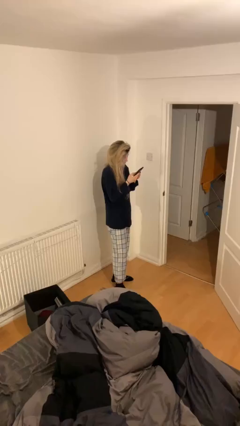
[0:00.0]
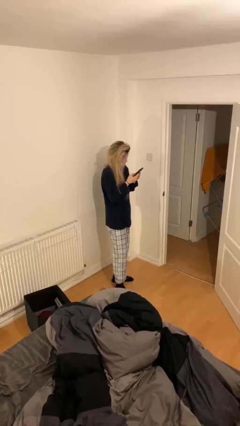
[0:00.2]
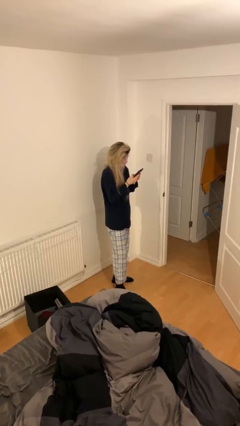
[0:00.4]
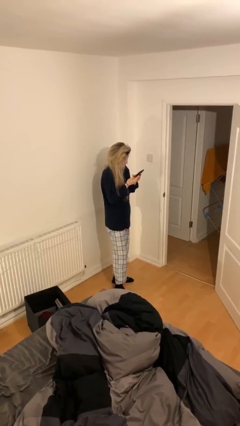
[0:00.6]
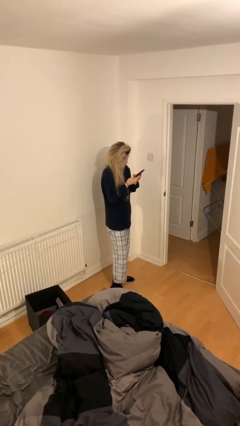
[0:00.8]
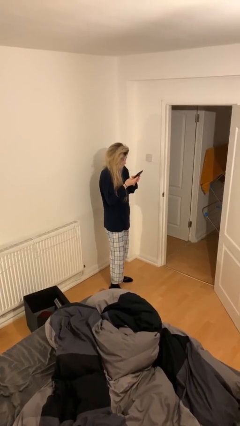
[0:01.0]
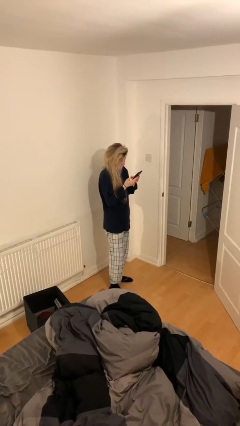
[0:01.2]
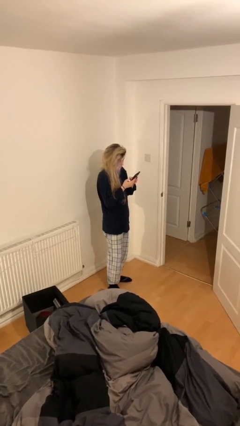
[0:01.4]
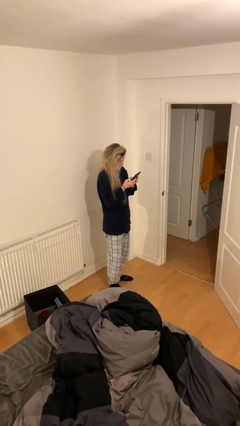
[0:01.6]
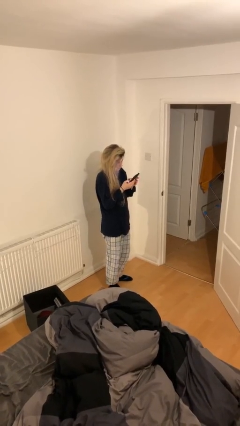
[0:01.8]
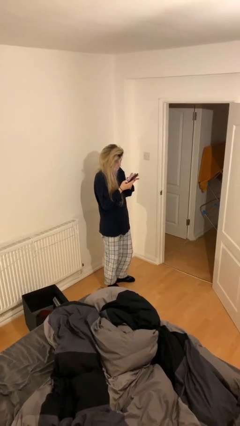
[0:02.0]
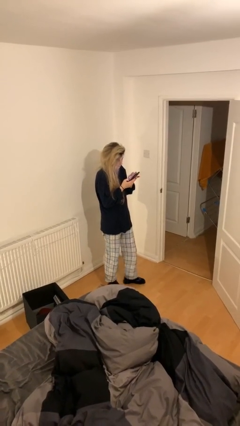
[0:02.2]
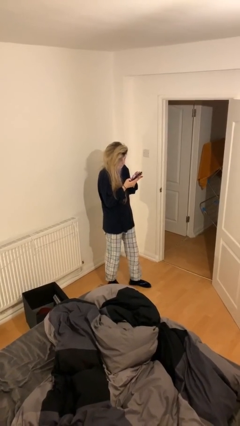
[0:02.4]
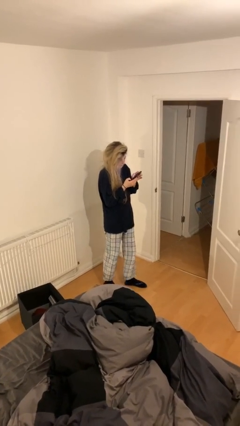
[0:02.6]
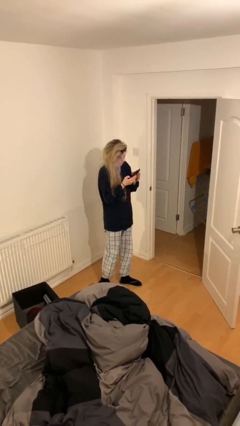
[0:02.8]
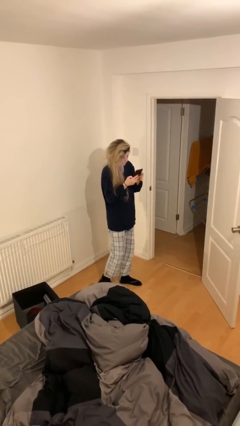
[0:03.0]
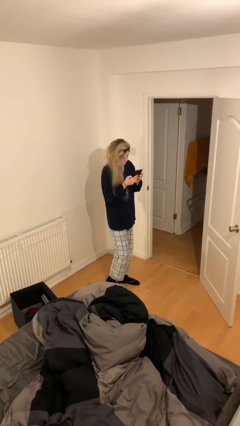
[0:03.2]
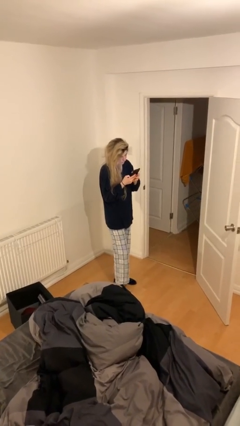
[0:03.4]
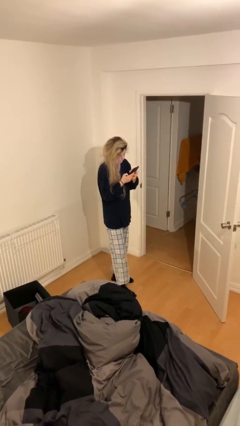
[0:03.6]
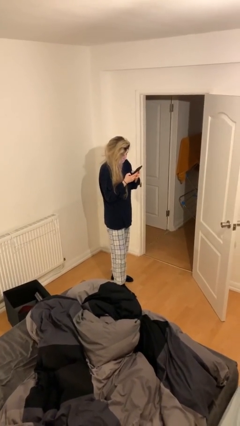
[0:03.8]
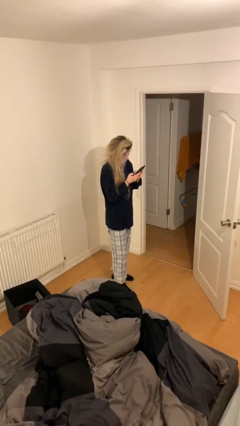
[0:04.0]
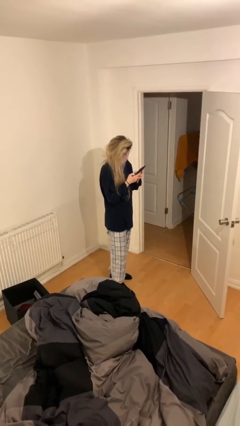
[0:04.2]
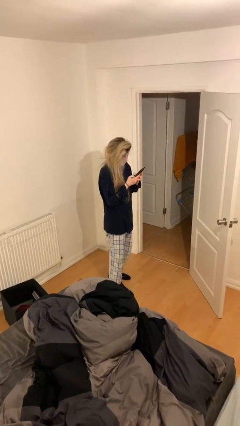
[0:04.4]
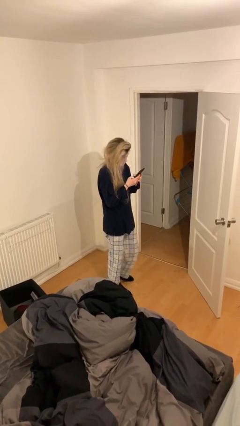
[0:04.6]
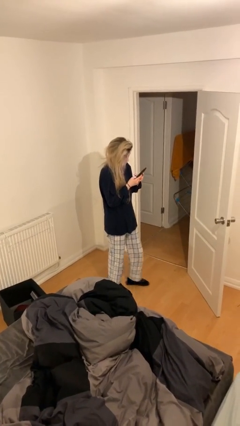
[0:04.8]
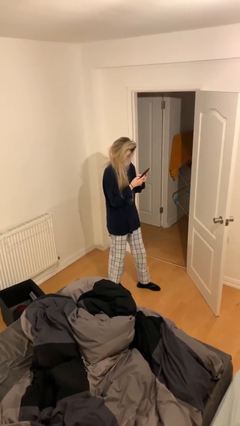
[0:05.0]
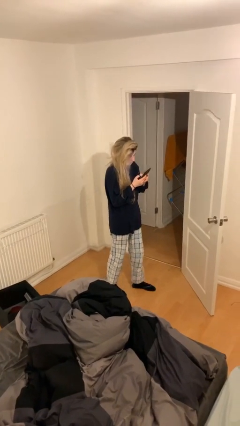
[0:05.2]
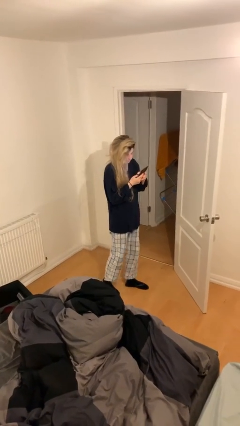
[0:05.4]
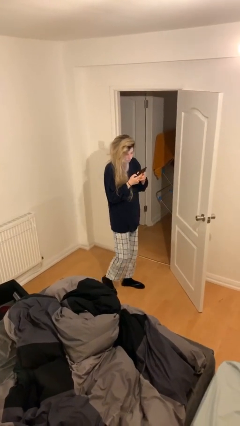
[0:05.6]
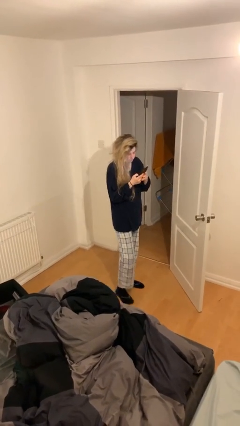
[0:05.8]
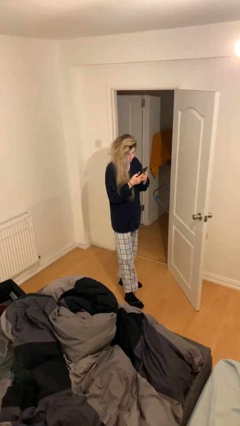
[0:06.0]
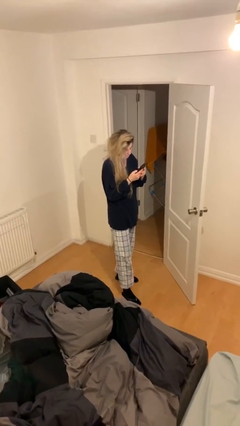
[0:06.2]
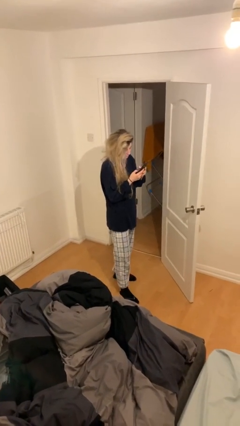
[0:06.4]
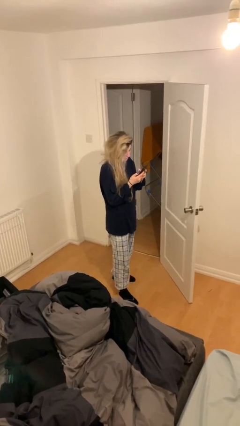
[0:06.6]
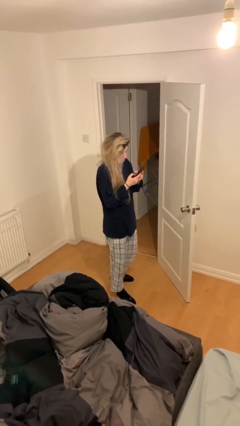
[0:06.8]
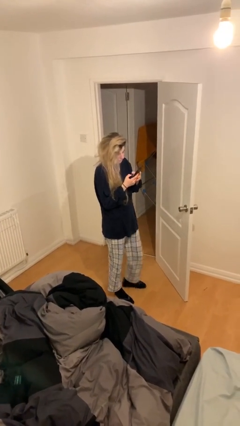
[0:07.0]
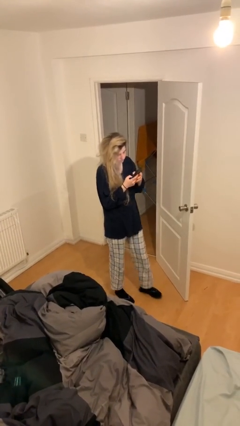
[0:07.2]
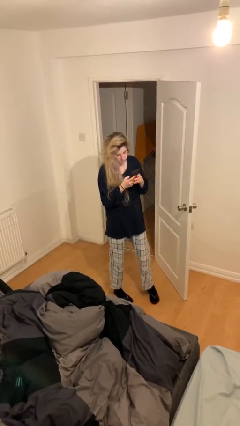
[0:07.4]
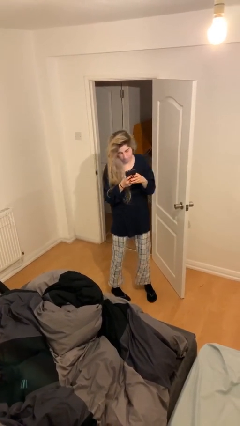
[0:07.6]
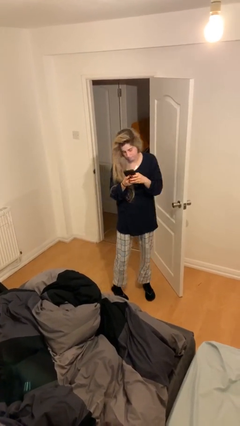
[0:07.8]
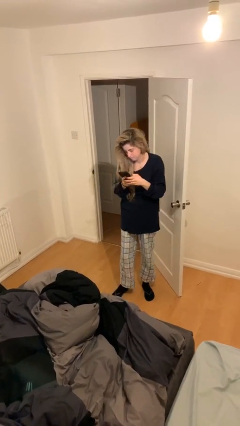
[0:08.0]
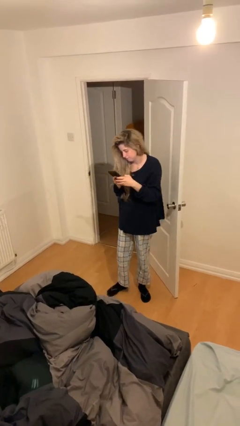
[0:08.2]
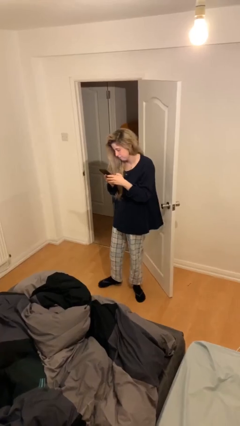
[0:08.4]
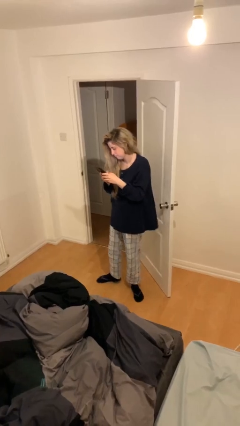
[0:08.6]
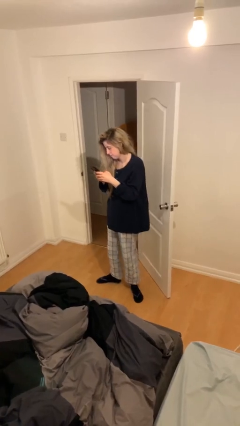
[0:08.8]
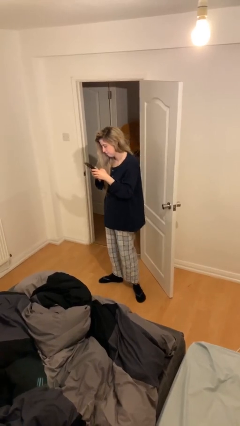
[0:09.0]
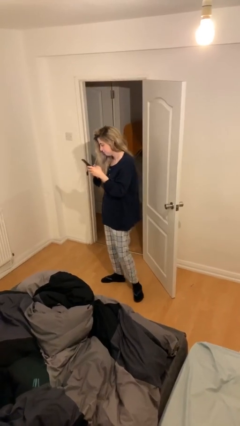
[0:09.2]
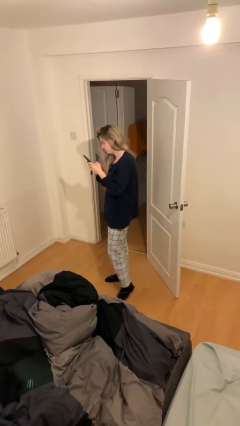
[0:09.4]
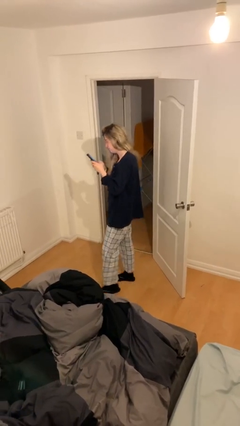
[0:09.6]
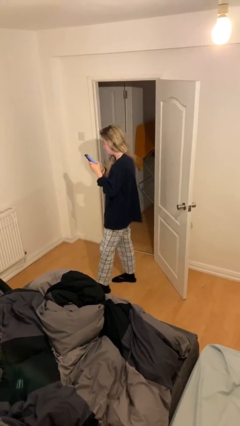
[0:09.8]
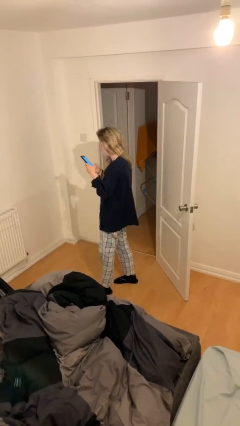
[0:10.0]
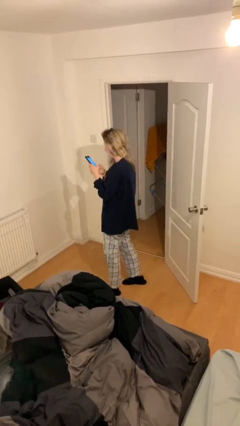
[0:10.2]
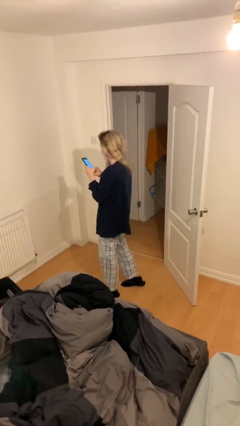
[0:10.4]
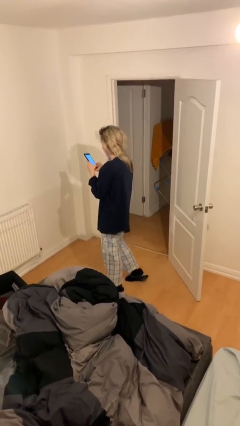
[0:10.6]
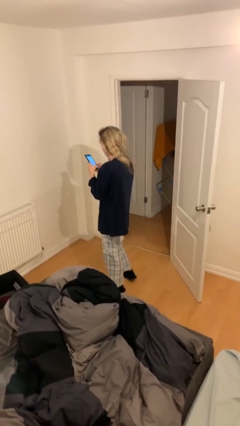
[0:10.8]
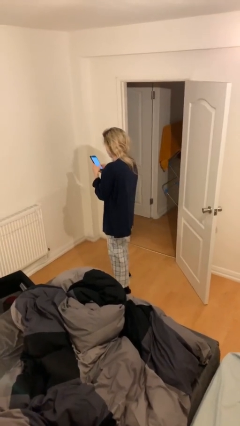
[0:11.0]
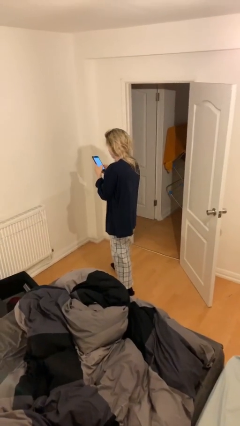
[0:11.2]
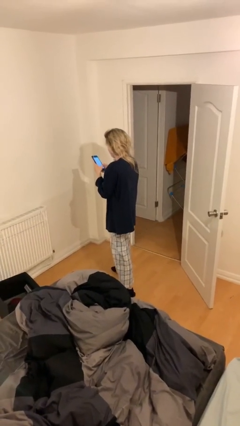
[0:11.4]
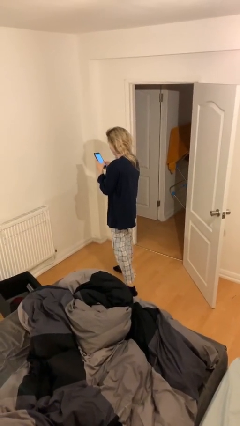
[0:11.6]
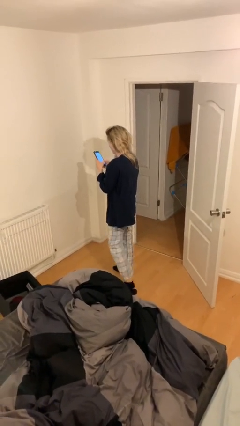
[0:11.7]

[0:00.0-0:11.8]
person texts on phone

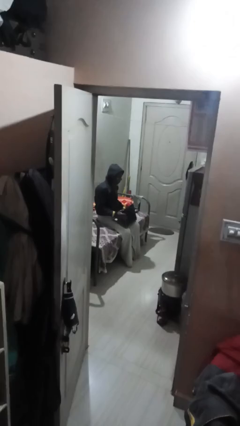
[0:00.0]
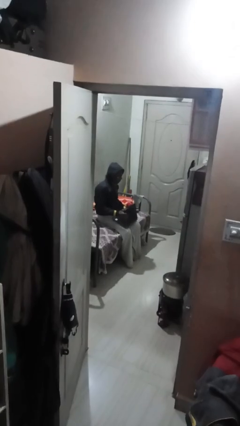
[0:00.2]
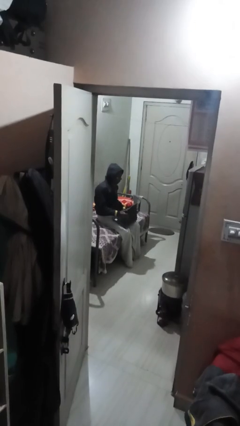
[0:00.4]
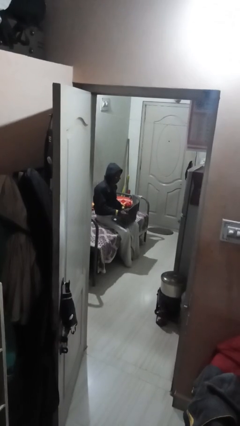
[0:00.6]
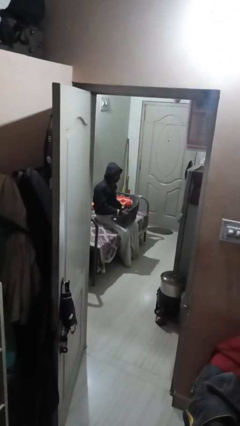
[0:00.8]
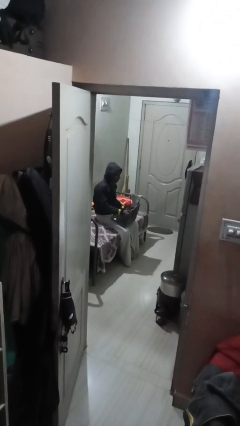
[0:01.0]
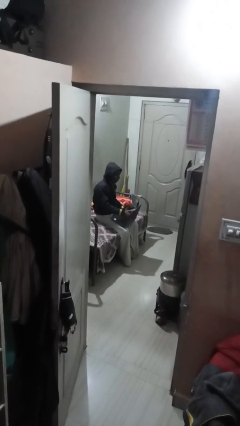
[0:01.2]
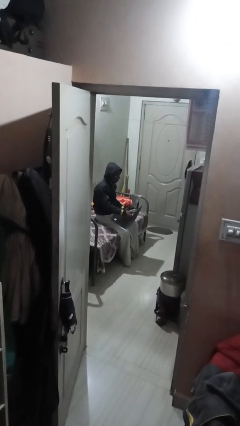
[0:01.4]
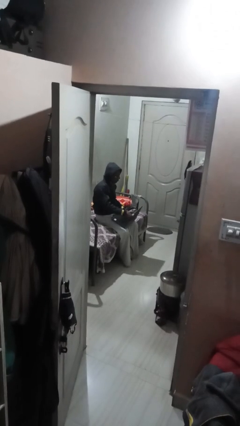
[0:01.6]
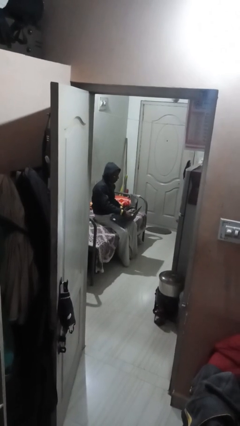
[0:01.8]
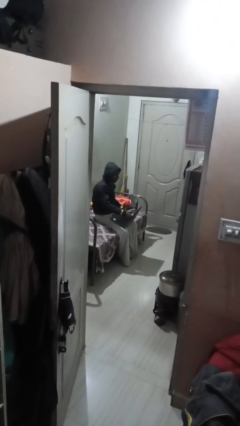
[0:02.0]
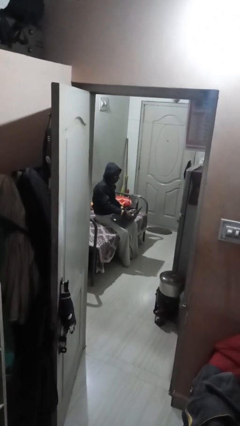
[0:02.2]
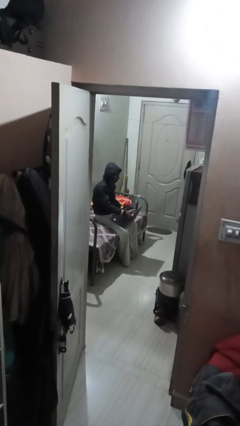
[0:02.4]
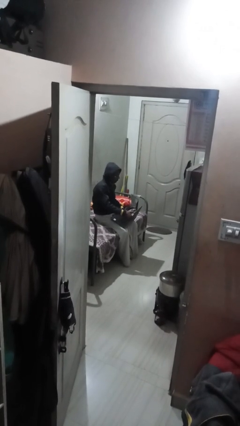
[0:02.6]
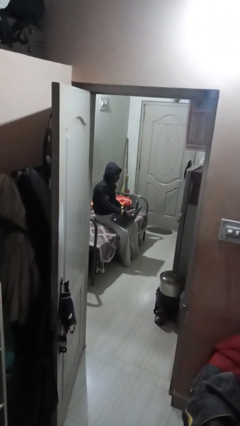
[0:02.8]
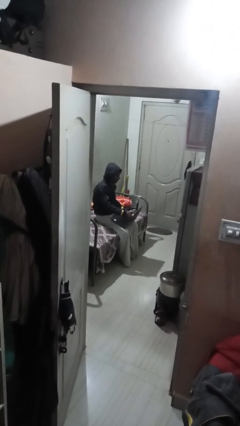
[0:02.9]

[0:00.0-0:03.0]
person interacts with laptop

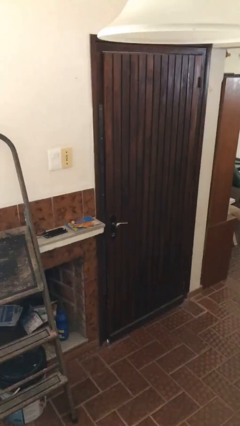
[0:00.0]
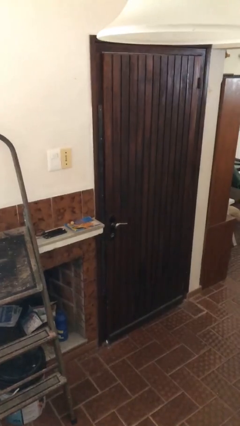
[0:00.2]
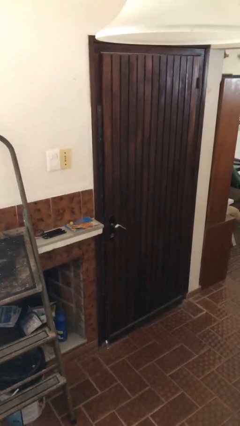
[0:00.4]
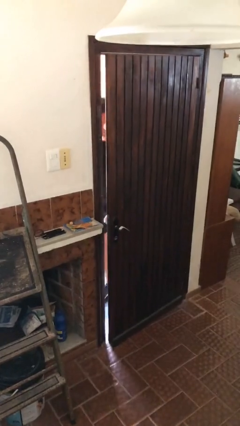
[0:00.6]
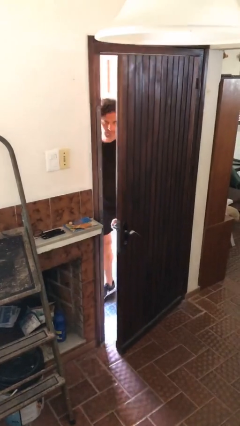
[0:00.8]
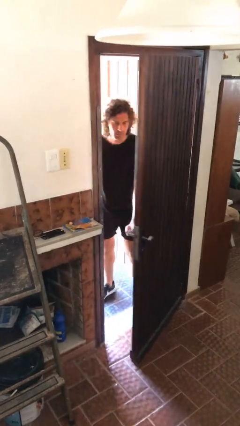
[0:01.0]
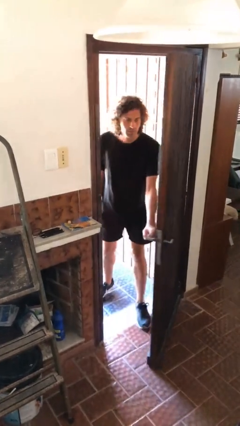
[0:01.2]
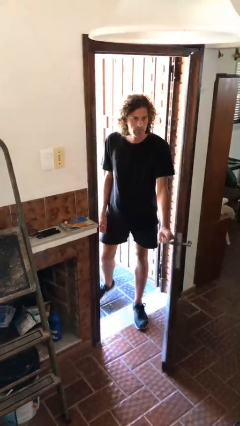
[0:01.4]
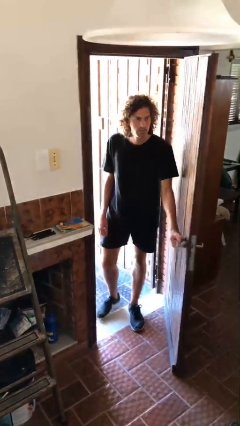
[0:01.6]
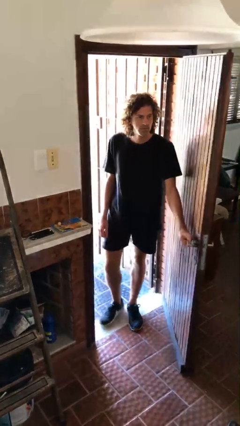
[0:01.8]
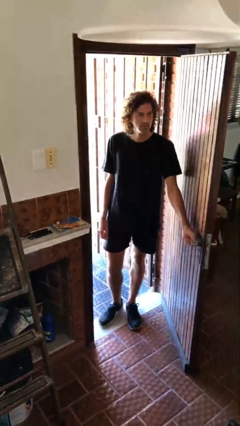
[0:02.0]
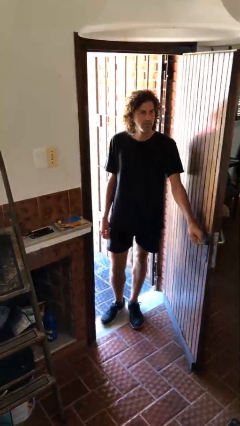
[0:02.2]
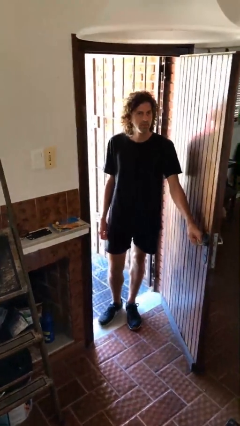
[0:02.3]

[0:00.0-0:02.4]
person opens facility door

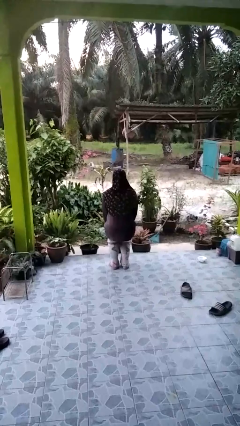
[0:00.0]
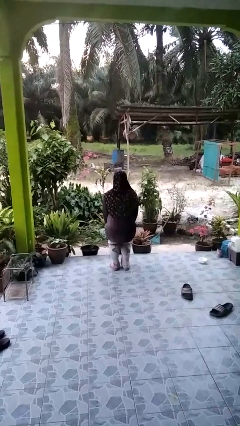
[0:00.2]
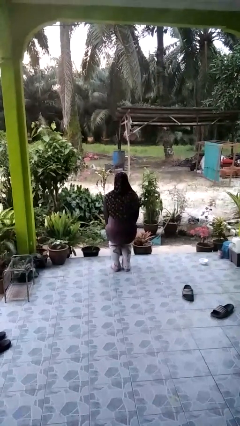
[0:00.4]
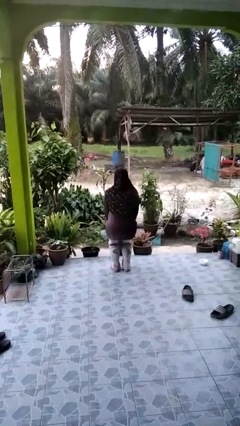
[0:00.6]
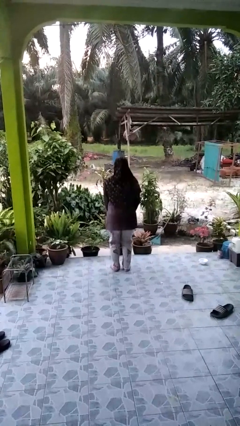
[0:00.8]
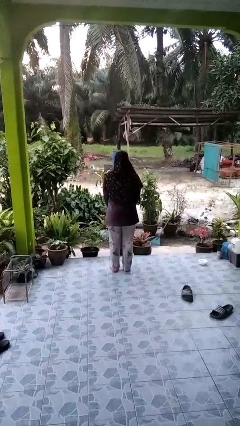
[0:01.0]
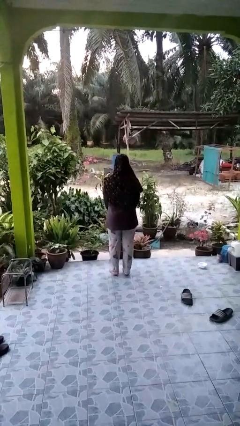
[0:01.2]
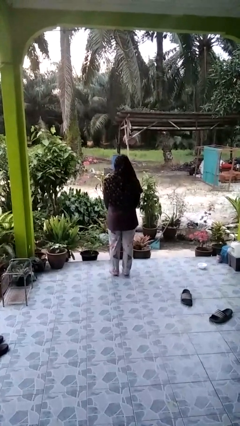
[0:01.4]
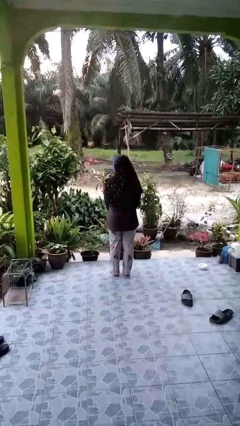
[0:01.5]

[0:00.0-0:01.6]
person stands up
